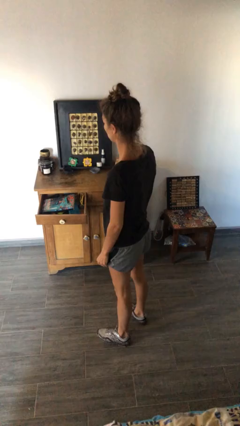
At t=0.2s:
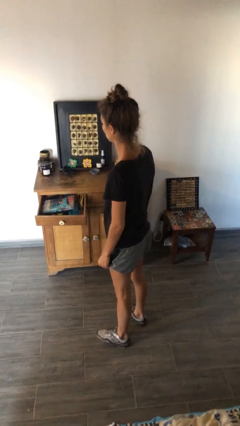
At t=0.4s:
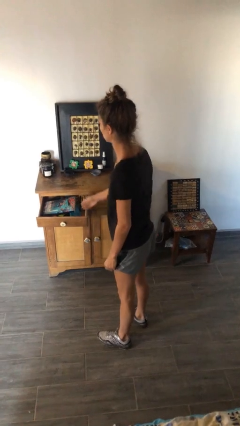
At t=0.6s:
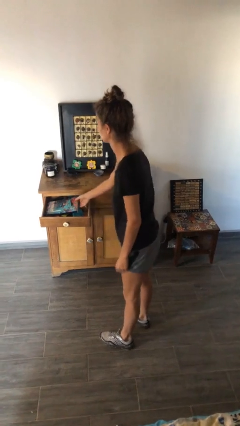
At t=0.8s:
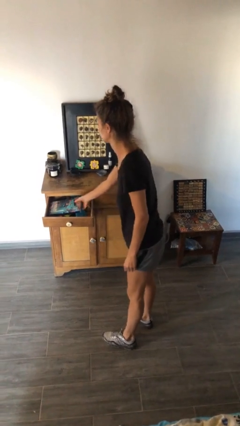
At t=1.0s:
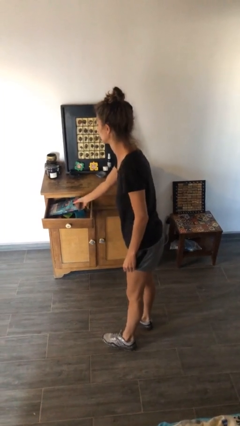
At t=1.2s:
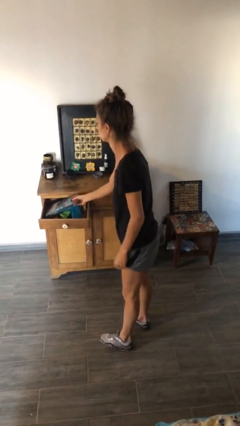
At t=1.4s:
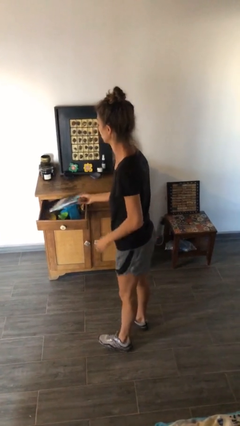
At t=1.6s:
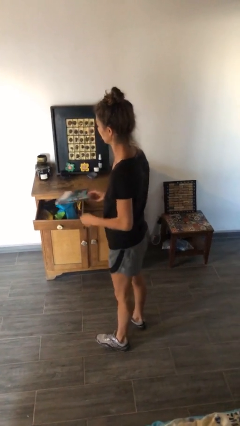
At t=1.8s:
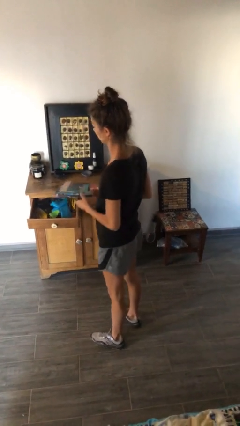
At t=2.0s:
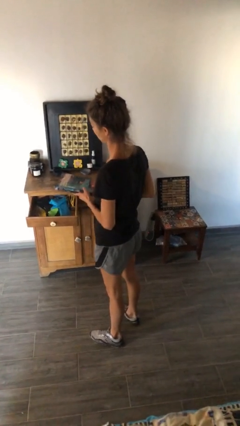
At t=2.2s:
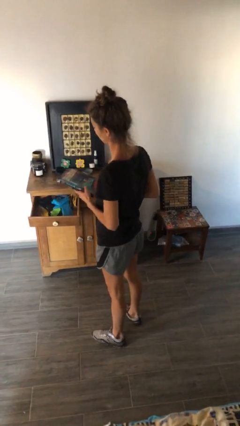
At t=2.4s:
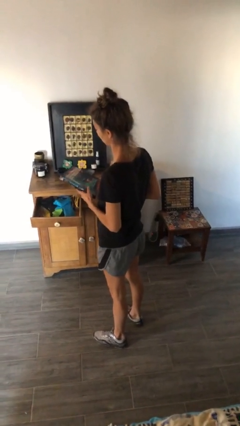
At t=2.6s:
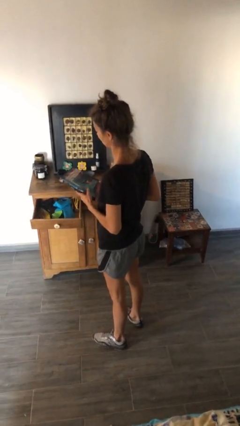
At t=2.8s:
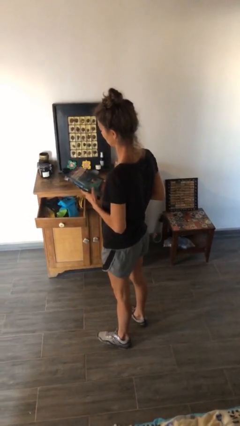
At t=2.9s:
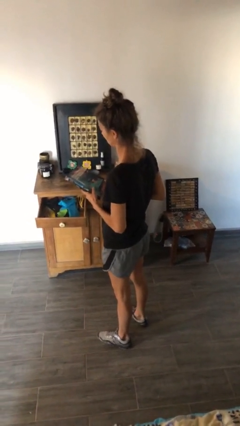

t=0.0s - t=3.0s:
person picks up object from cabinet

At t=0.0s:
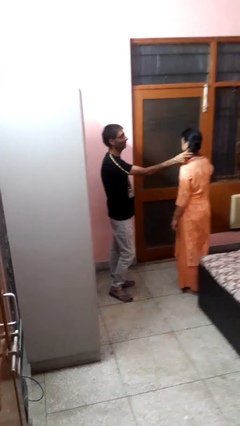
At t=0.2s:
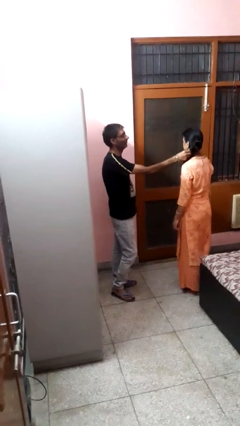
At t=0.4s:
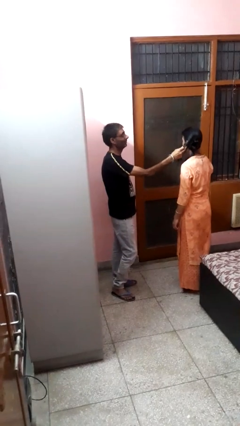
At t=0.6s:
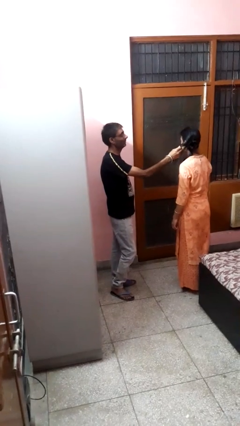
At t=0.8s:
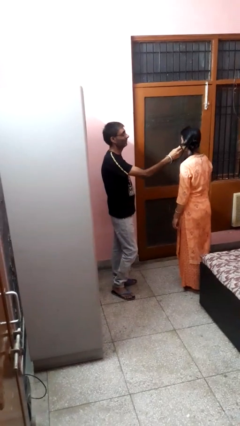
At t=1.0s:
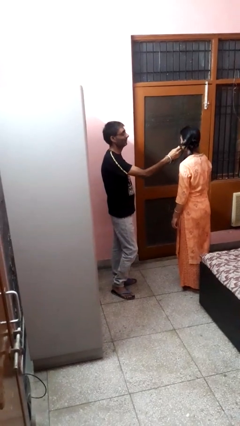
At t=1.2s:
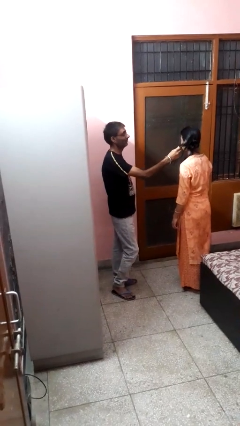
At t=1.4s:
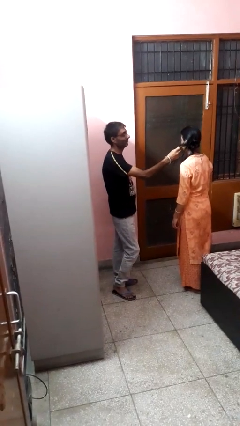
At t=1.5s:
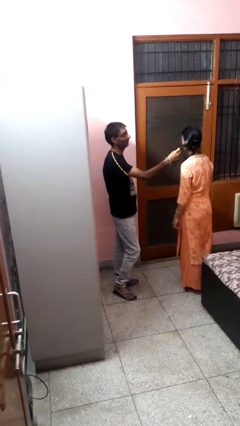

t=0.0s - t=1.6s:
person grabs person by hair

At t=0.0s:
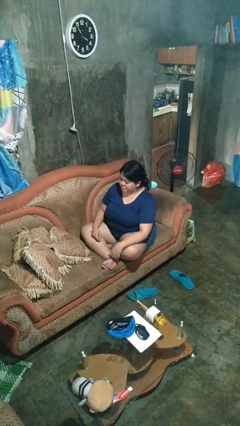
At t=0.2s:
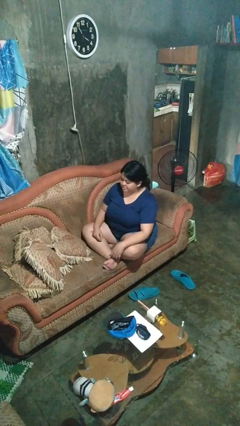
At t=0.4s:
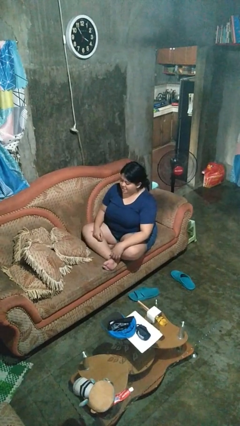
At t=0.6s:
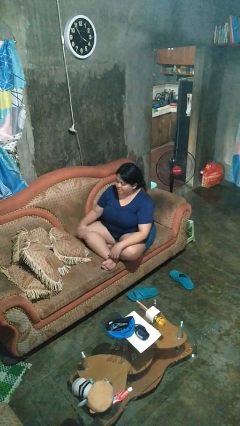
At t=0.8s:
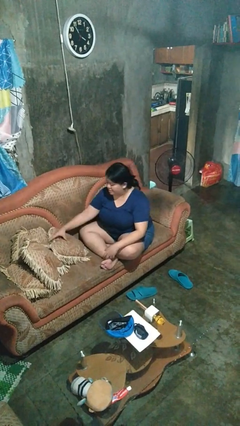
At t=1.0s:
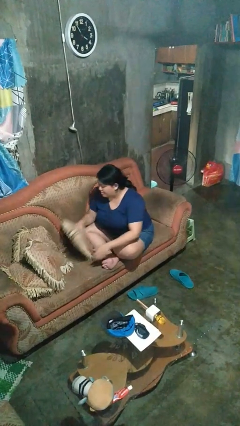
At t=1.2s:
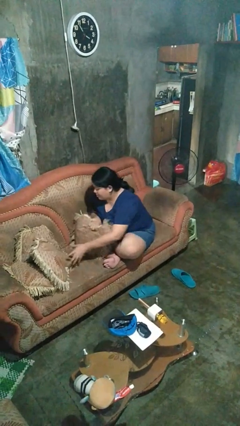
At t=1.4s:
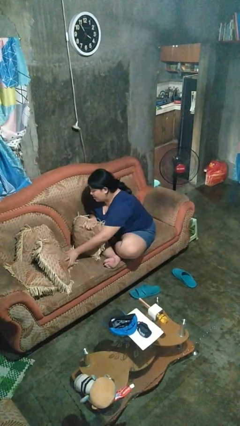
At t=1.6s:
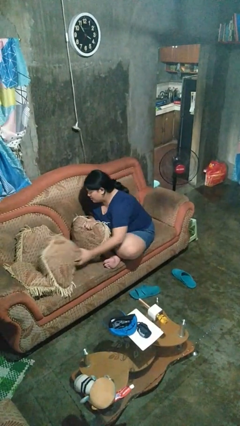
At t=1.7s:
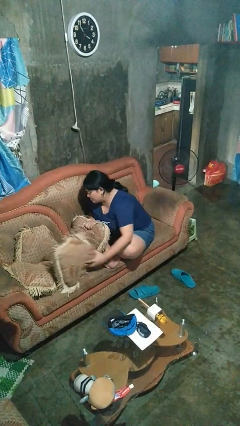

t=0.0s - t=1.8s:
person searches in couch

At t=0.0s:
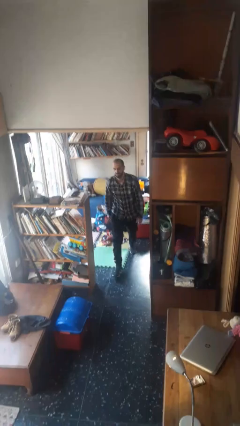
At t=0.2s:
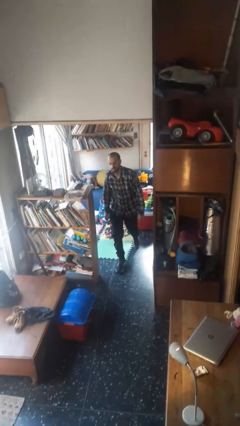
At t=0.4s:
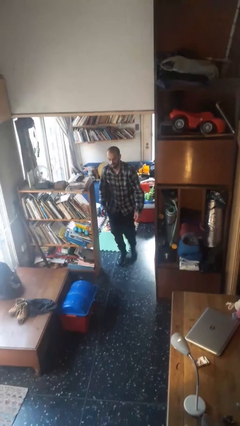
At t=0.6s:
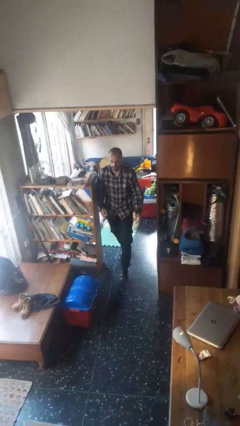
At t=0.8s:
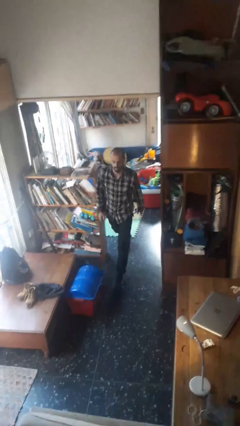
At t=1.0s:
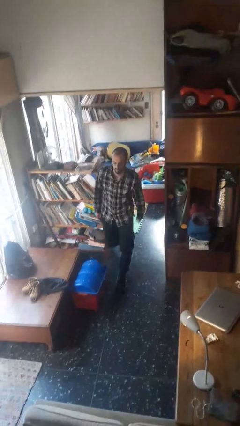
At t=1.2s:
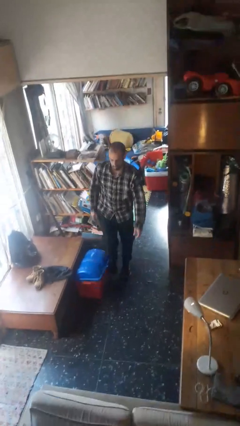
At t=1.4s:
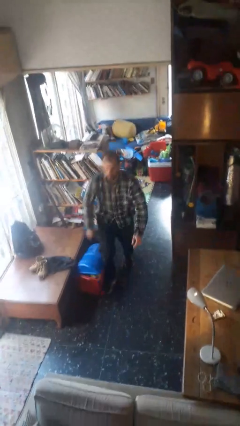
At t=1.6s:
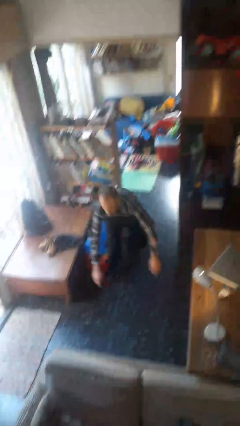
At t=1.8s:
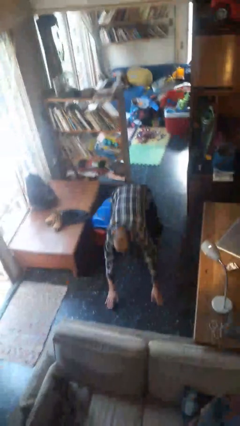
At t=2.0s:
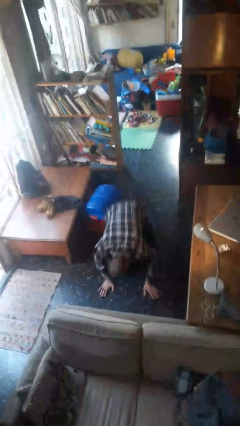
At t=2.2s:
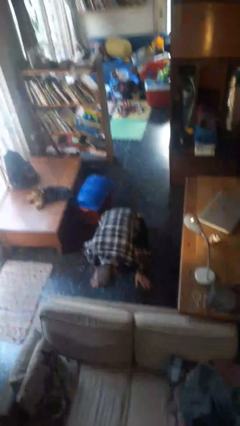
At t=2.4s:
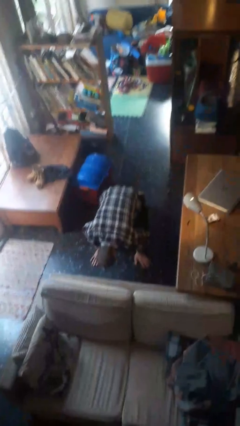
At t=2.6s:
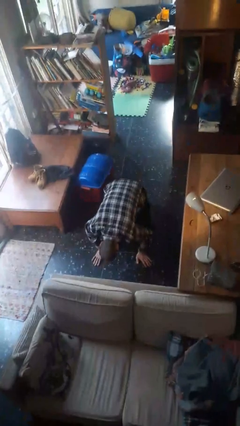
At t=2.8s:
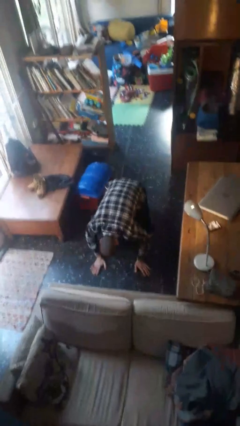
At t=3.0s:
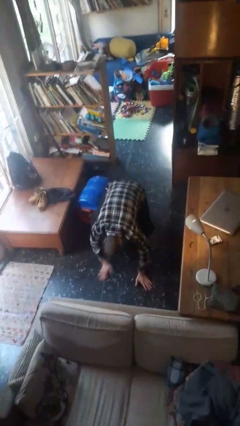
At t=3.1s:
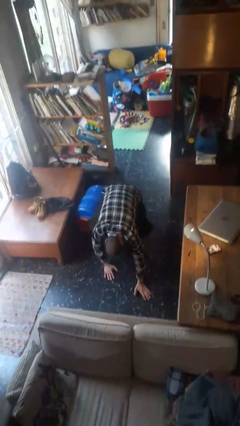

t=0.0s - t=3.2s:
person trips on object on floor

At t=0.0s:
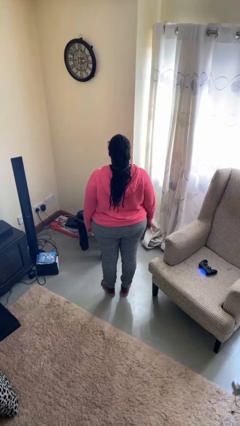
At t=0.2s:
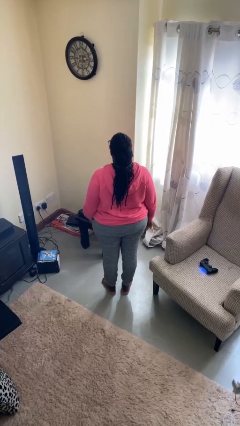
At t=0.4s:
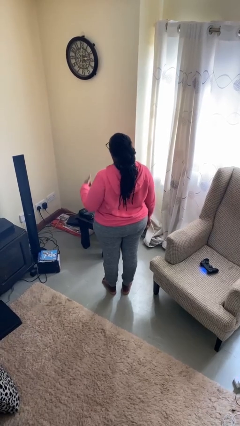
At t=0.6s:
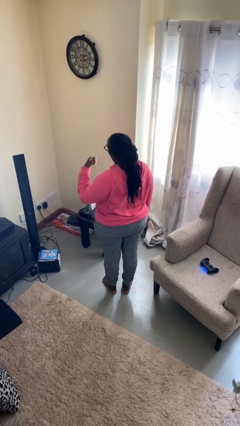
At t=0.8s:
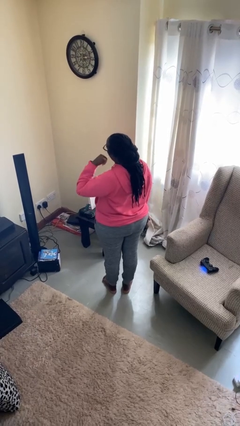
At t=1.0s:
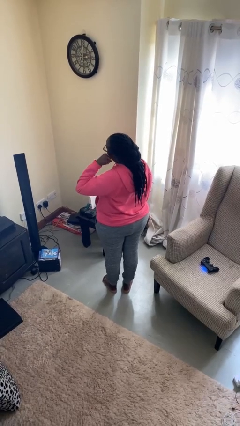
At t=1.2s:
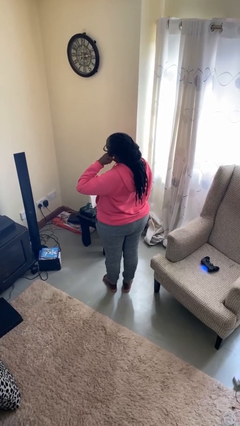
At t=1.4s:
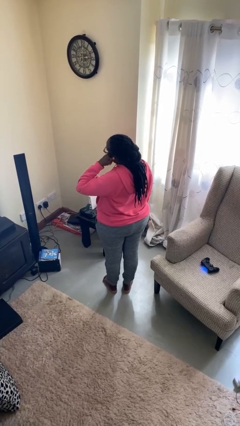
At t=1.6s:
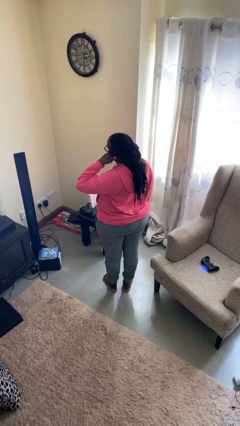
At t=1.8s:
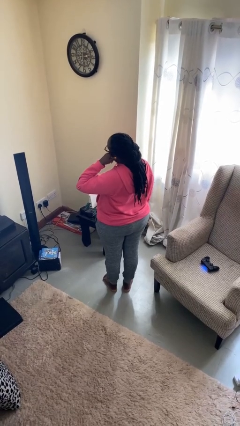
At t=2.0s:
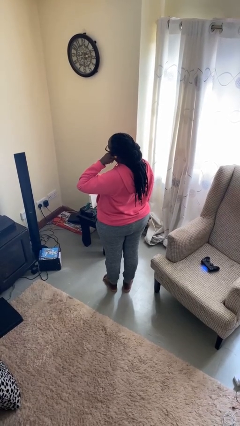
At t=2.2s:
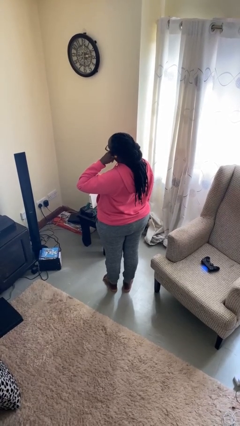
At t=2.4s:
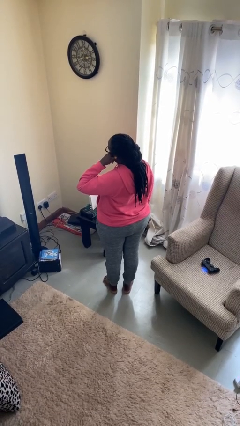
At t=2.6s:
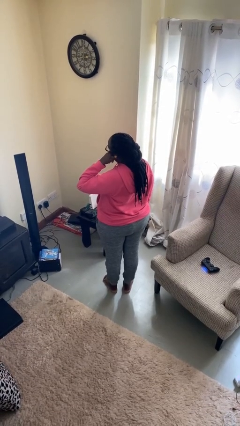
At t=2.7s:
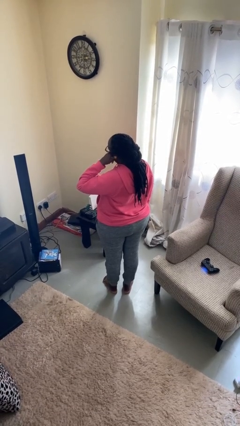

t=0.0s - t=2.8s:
person gestures call me

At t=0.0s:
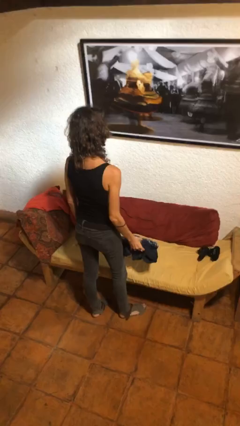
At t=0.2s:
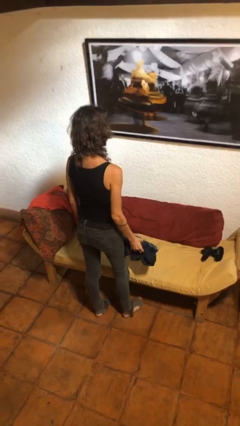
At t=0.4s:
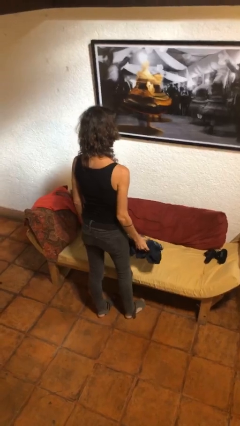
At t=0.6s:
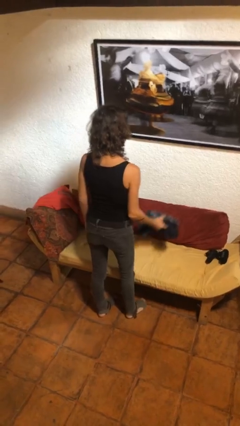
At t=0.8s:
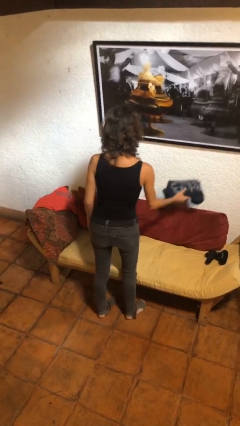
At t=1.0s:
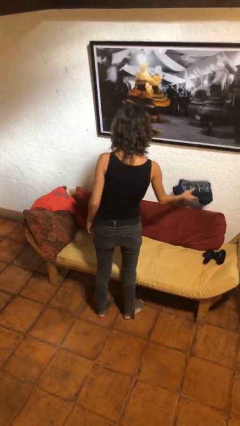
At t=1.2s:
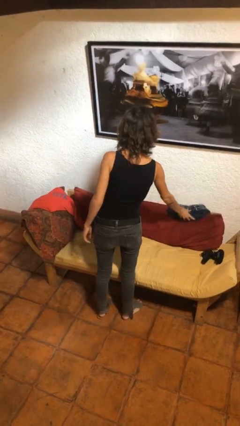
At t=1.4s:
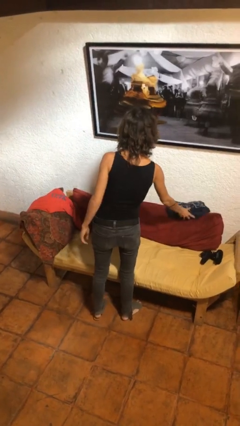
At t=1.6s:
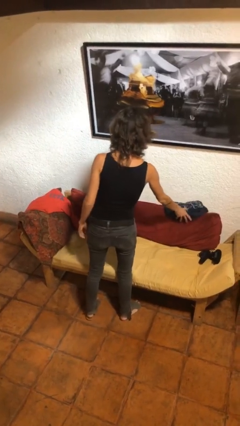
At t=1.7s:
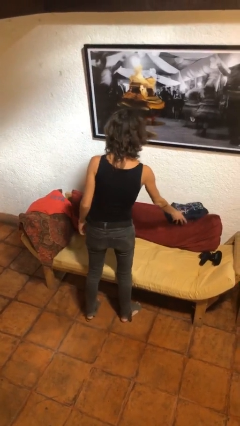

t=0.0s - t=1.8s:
person puts down object on couch

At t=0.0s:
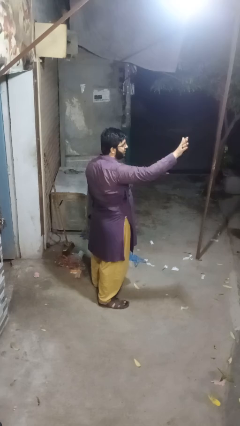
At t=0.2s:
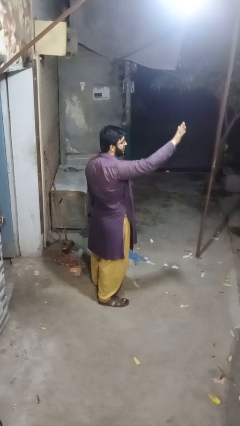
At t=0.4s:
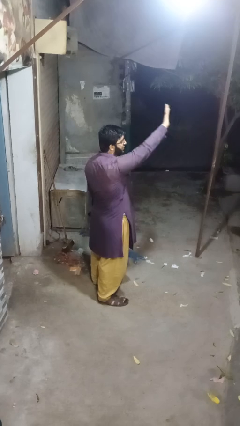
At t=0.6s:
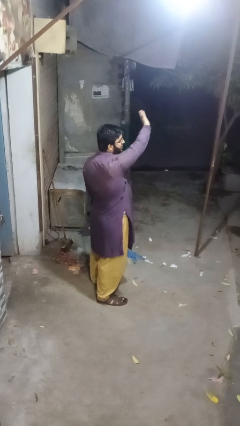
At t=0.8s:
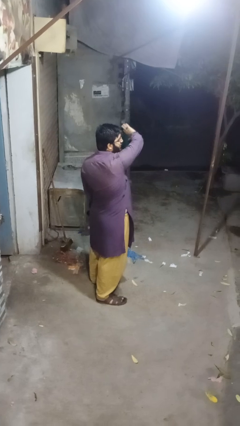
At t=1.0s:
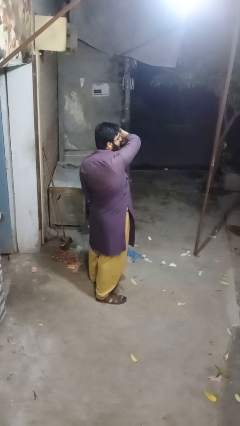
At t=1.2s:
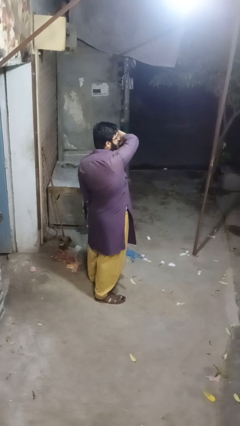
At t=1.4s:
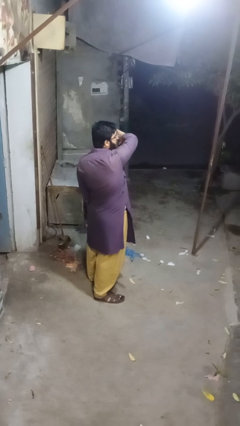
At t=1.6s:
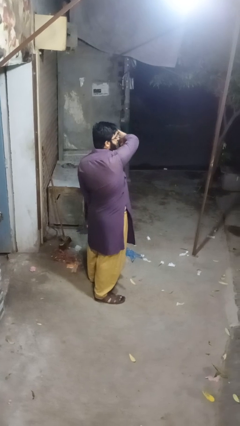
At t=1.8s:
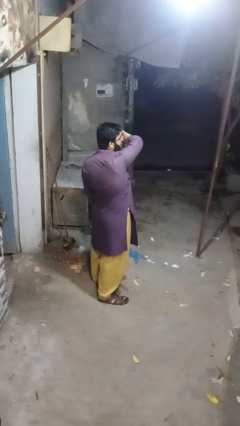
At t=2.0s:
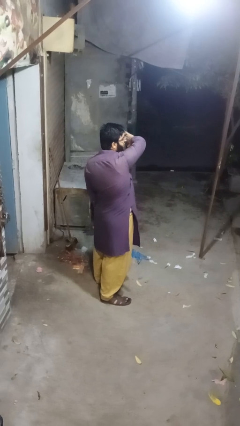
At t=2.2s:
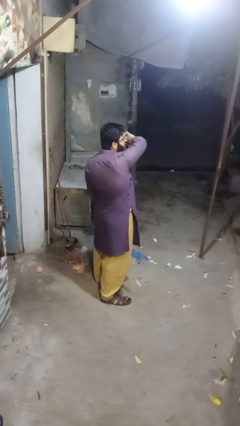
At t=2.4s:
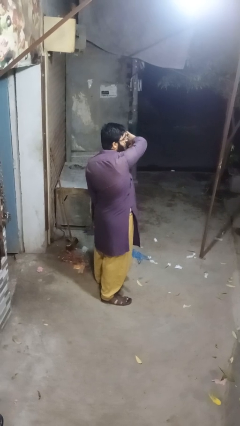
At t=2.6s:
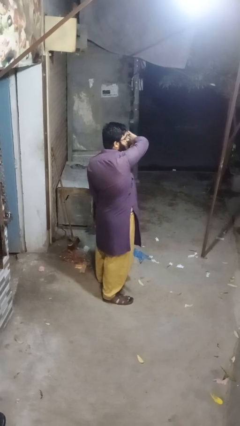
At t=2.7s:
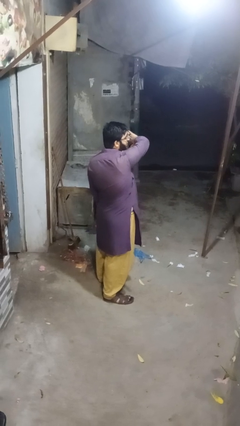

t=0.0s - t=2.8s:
person gestures swipe left
